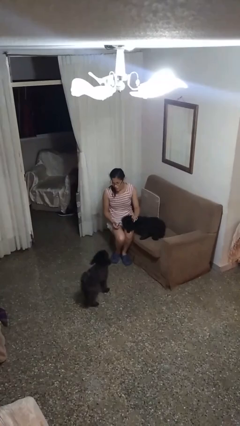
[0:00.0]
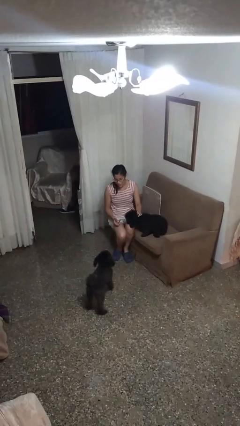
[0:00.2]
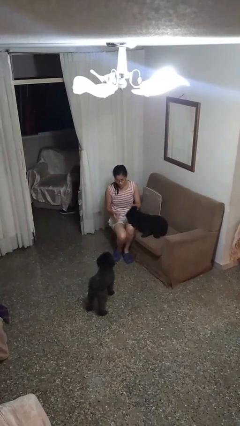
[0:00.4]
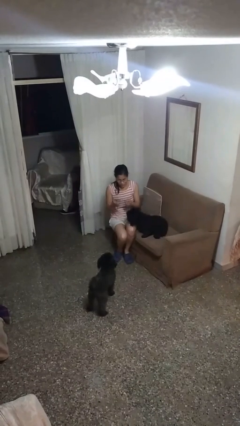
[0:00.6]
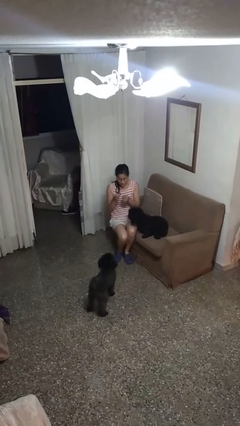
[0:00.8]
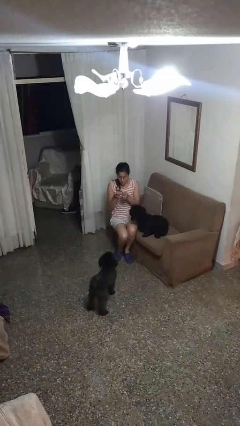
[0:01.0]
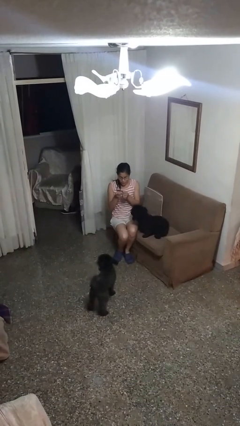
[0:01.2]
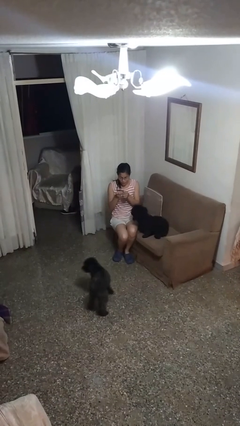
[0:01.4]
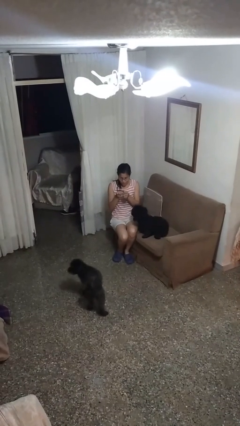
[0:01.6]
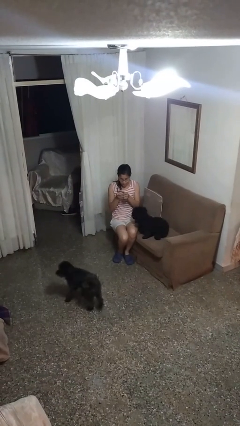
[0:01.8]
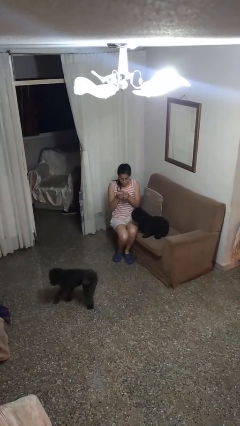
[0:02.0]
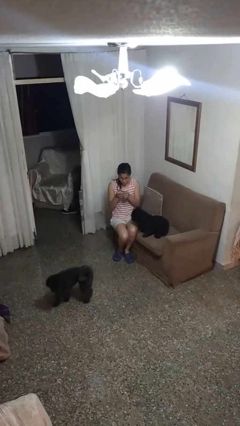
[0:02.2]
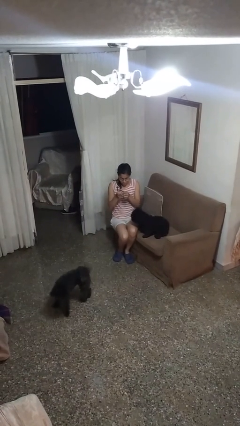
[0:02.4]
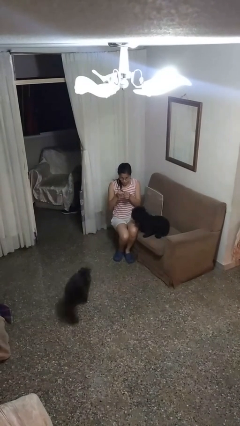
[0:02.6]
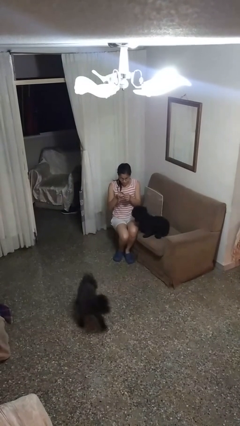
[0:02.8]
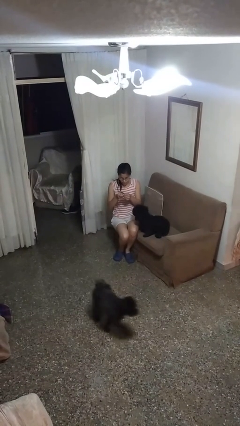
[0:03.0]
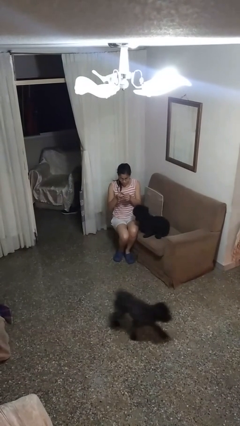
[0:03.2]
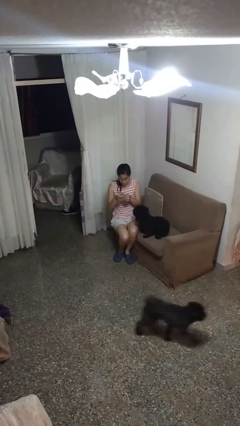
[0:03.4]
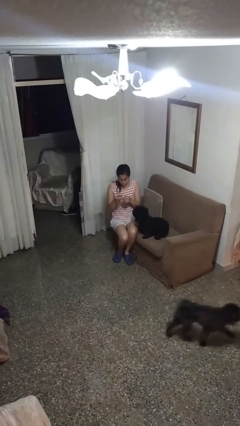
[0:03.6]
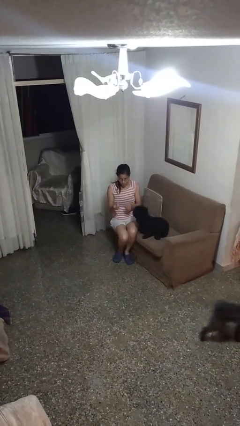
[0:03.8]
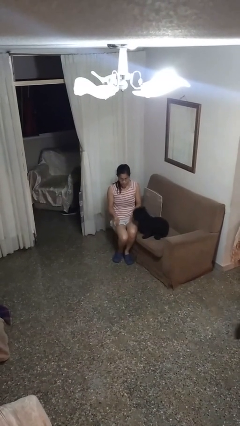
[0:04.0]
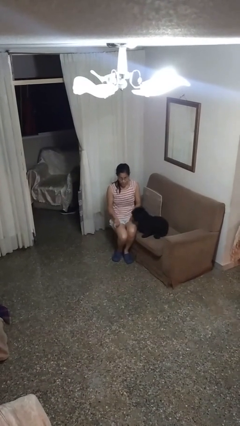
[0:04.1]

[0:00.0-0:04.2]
person clips fingernails

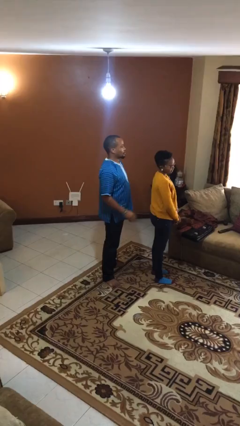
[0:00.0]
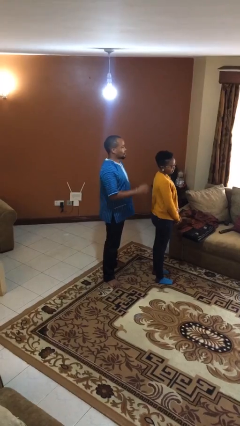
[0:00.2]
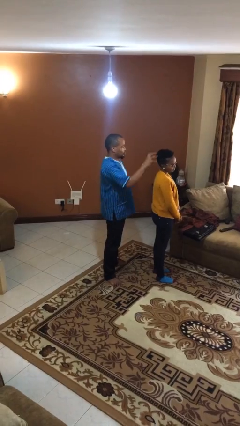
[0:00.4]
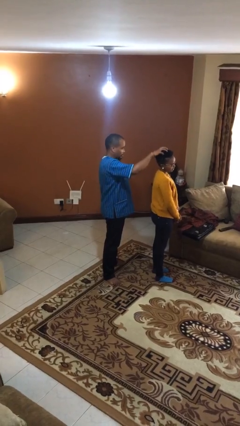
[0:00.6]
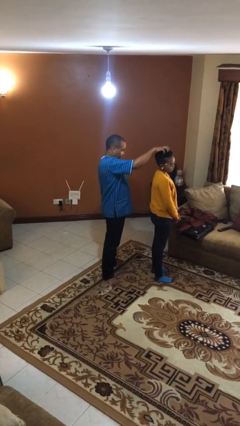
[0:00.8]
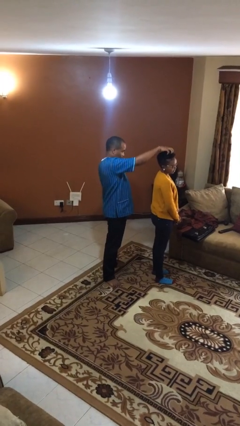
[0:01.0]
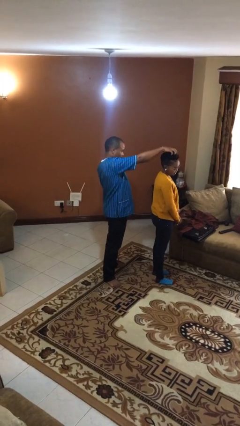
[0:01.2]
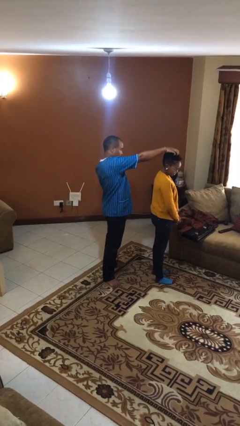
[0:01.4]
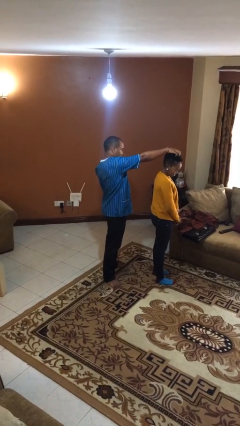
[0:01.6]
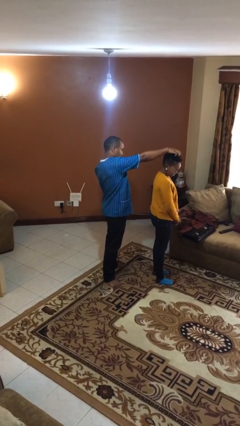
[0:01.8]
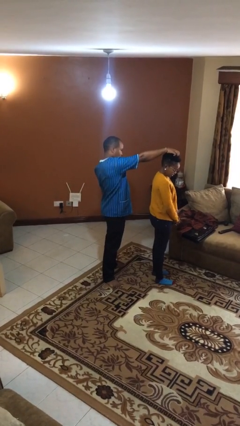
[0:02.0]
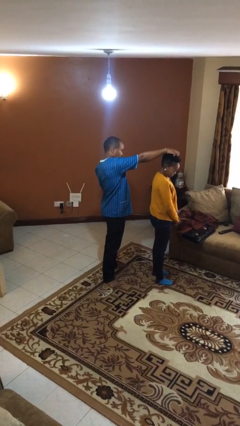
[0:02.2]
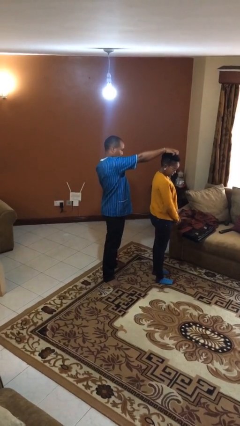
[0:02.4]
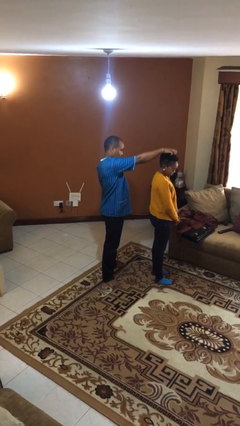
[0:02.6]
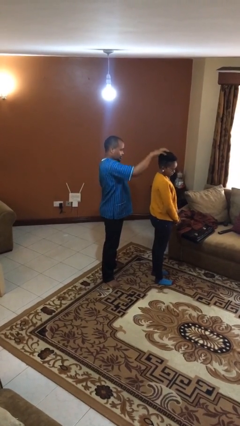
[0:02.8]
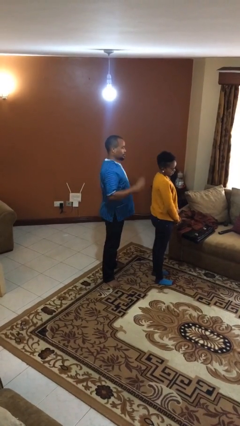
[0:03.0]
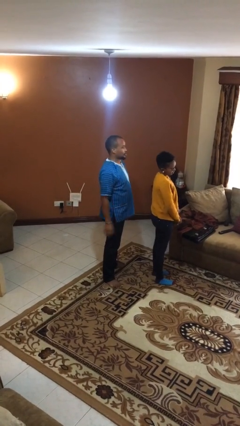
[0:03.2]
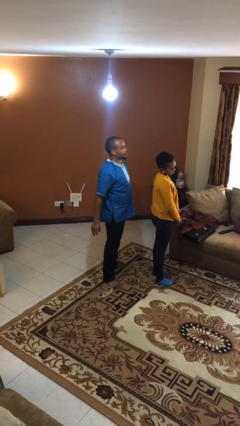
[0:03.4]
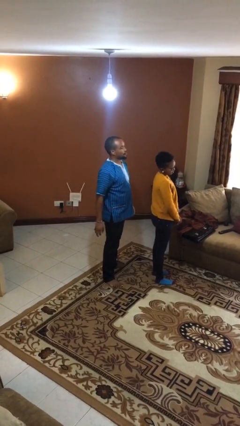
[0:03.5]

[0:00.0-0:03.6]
person grabs person by hair

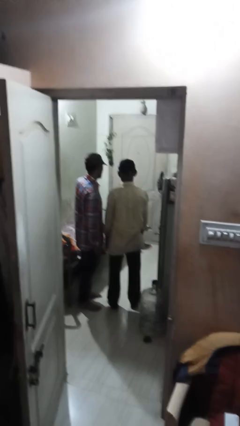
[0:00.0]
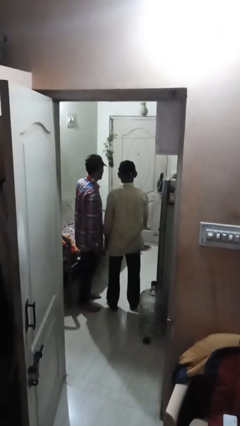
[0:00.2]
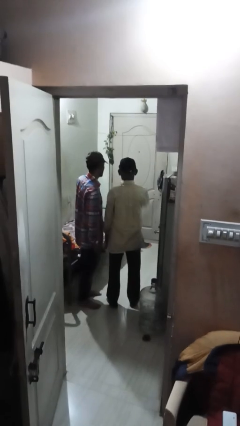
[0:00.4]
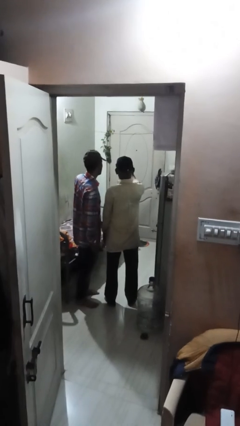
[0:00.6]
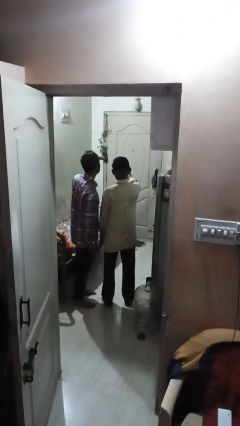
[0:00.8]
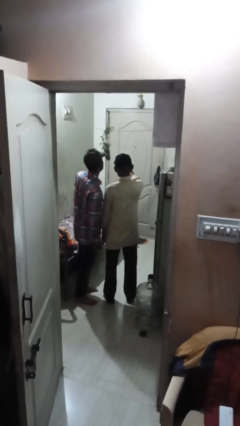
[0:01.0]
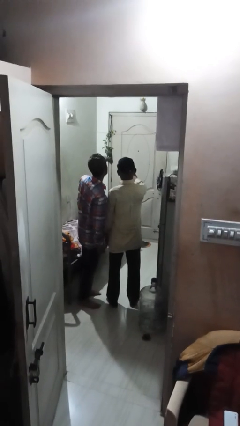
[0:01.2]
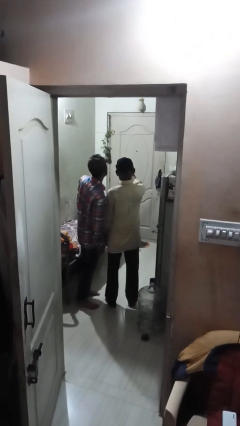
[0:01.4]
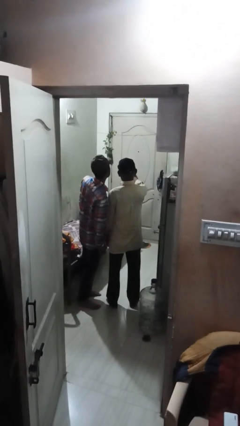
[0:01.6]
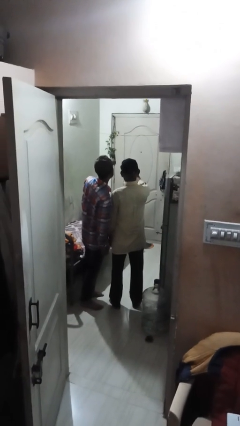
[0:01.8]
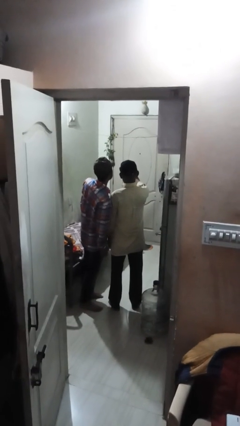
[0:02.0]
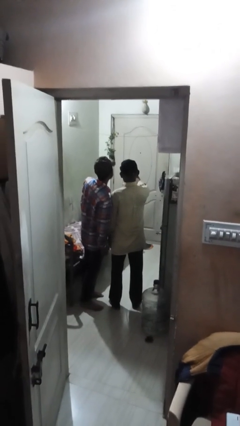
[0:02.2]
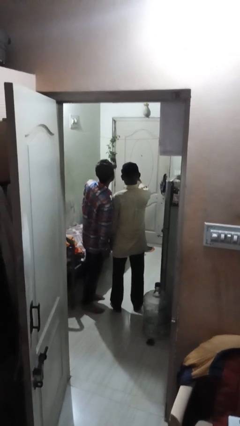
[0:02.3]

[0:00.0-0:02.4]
person takes selfie with person

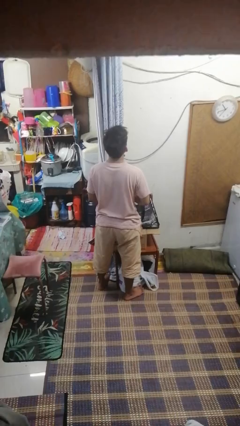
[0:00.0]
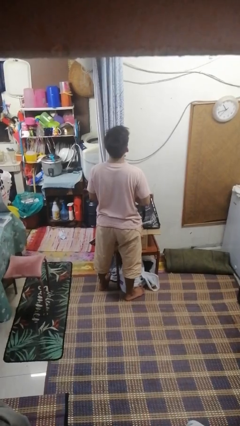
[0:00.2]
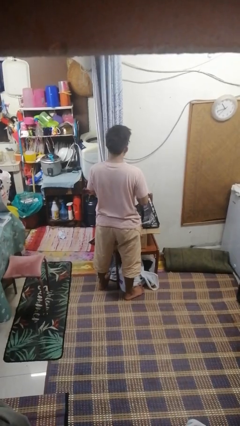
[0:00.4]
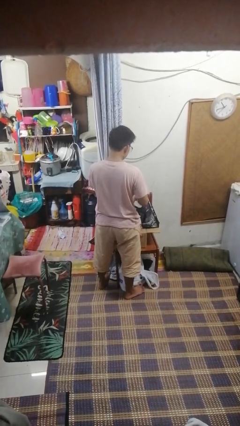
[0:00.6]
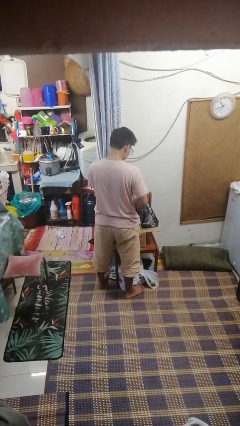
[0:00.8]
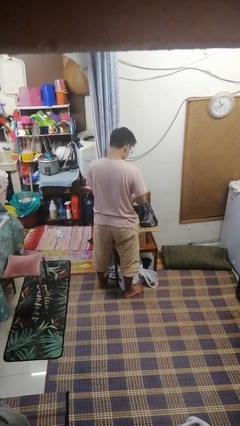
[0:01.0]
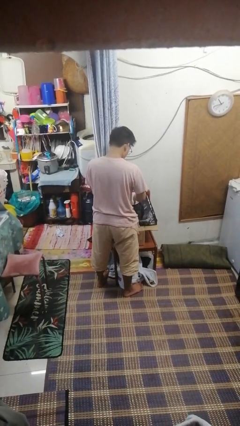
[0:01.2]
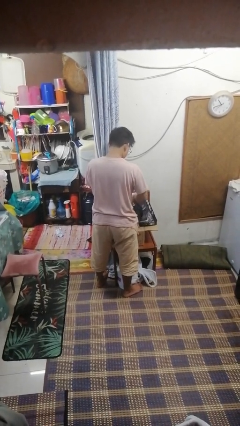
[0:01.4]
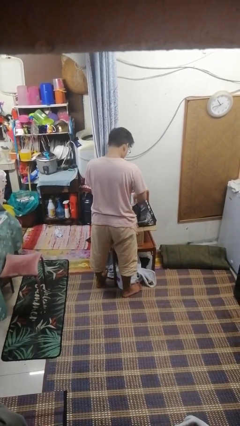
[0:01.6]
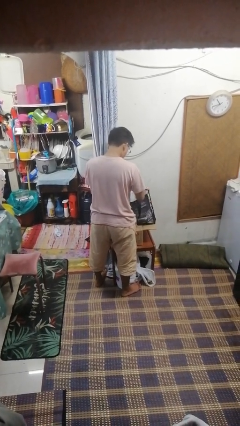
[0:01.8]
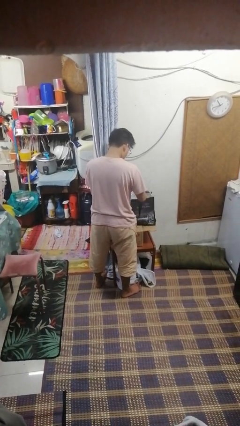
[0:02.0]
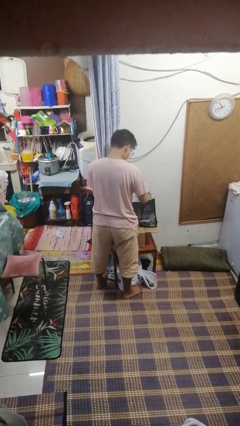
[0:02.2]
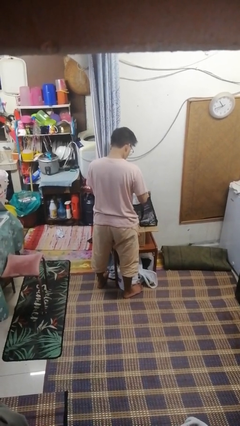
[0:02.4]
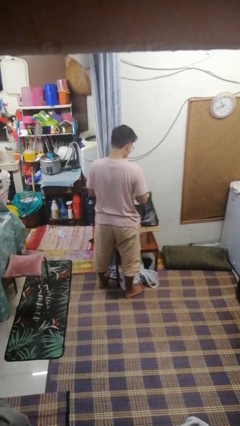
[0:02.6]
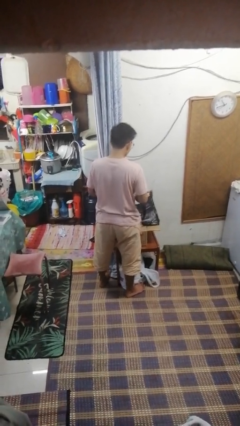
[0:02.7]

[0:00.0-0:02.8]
person searches in bag

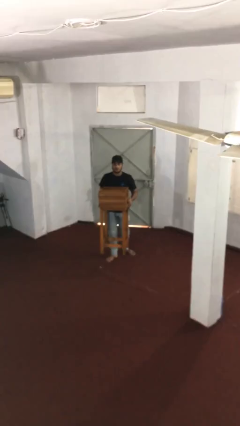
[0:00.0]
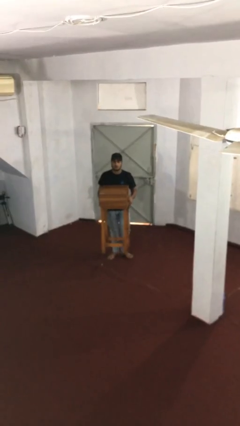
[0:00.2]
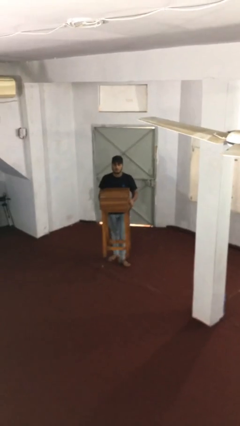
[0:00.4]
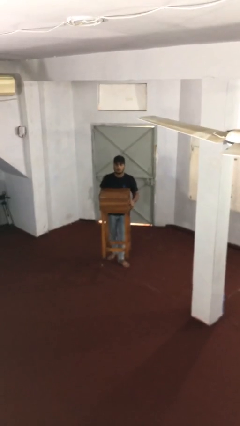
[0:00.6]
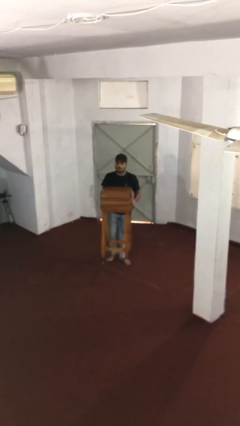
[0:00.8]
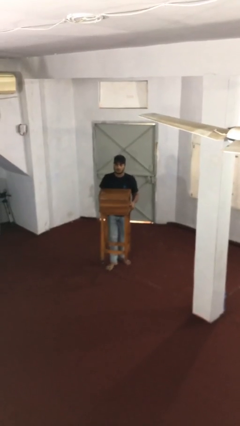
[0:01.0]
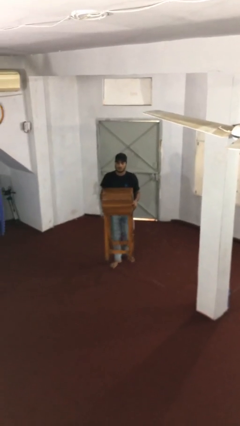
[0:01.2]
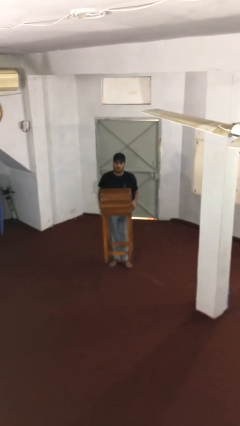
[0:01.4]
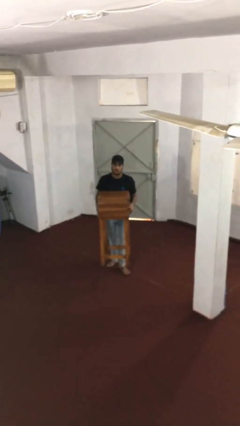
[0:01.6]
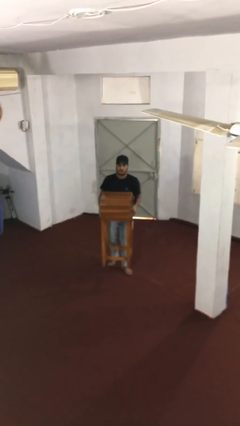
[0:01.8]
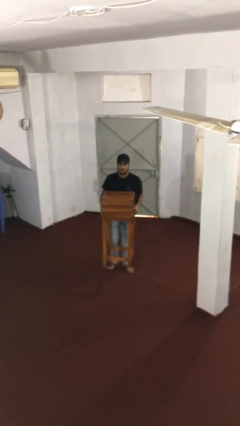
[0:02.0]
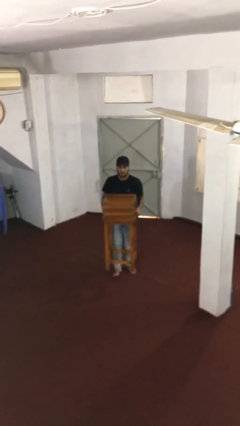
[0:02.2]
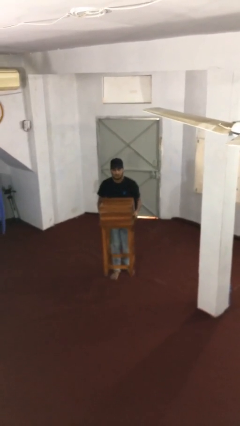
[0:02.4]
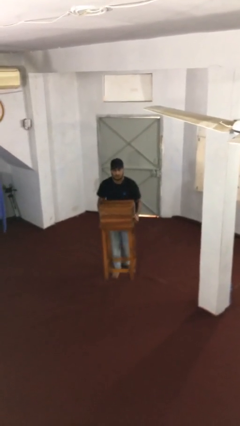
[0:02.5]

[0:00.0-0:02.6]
person carries heavy object

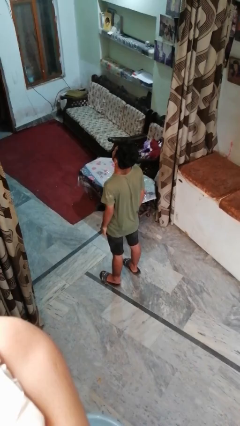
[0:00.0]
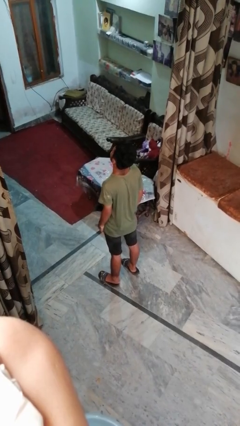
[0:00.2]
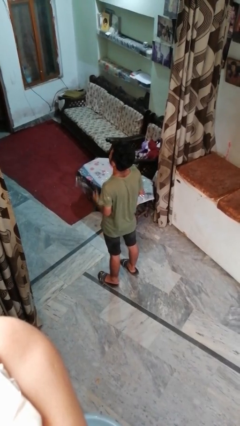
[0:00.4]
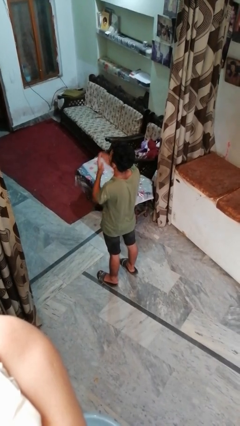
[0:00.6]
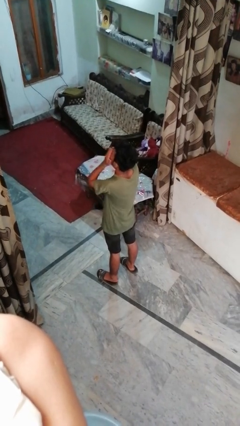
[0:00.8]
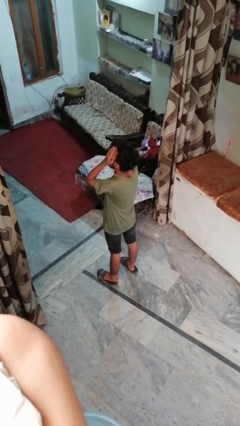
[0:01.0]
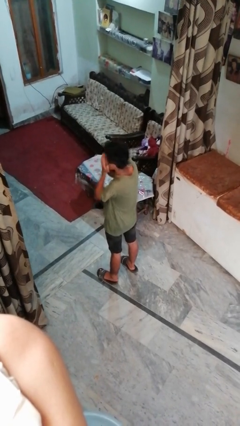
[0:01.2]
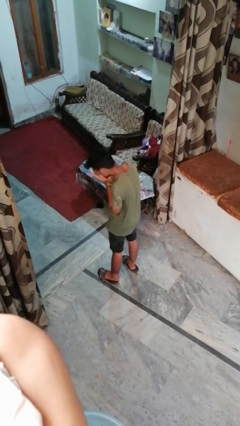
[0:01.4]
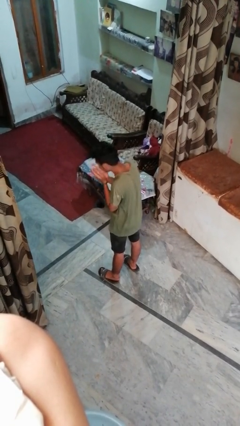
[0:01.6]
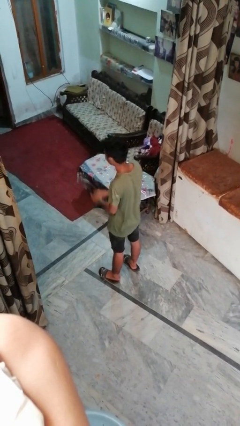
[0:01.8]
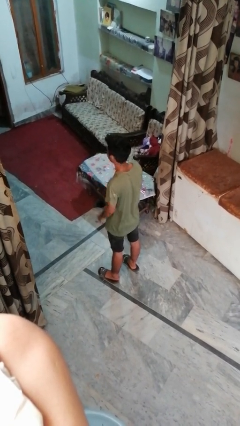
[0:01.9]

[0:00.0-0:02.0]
person sneezes into hand
